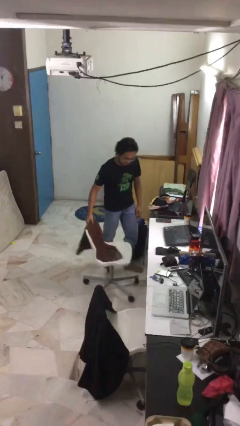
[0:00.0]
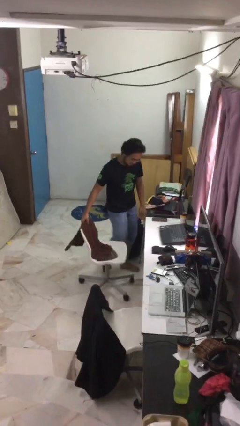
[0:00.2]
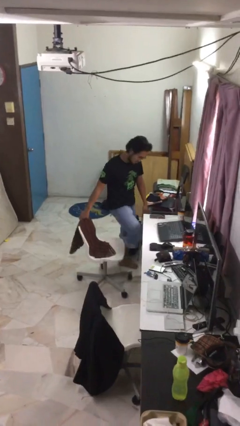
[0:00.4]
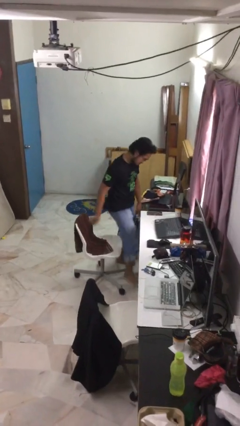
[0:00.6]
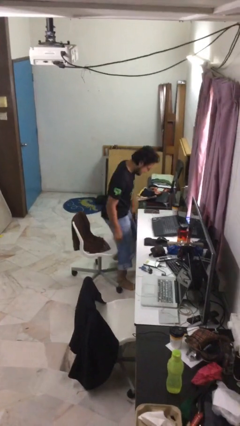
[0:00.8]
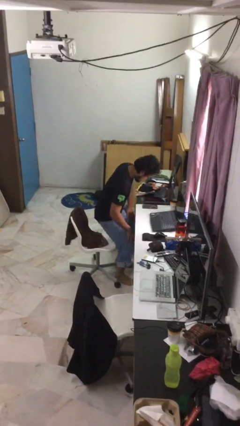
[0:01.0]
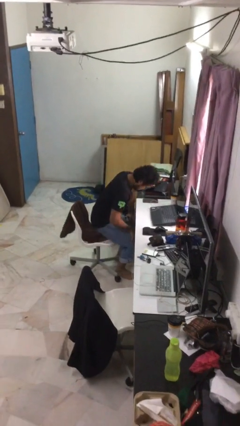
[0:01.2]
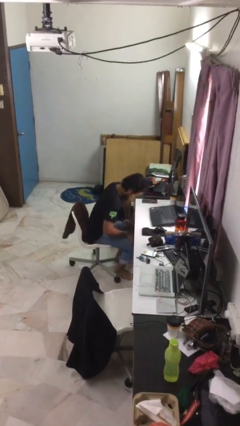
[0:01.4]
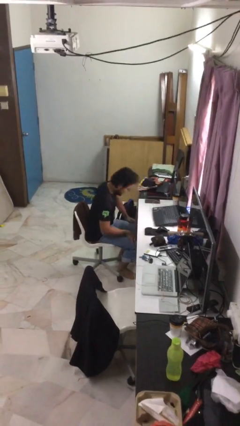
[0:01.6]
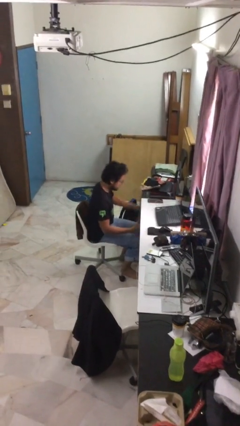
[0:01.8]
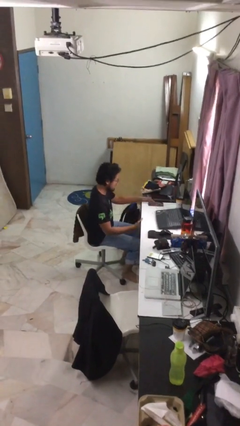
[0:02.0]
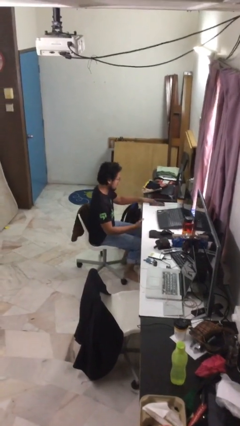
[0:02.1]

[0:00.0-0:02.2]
person sits down

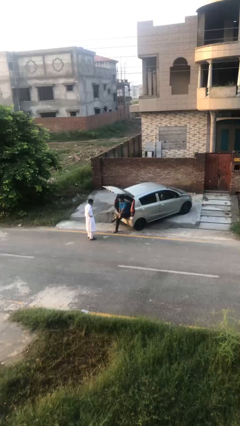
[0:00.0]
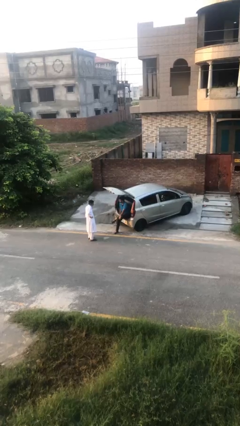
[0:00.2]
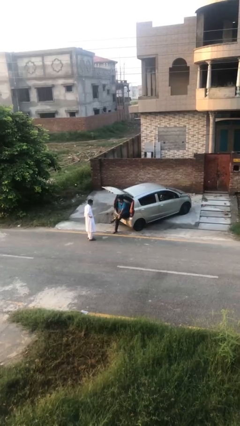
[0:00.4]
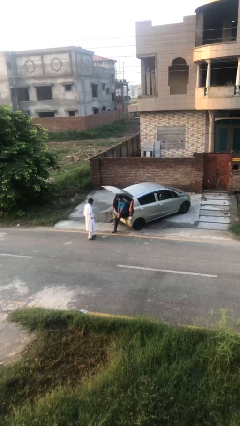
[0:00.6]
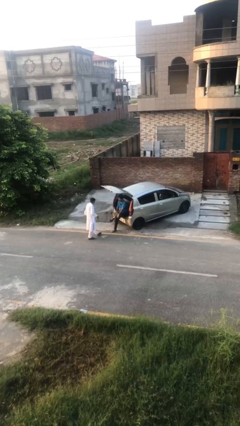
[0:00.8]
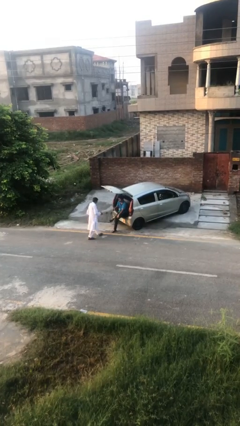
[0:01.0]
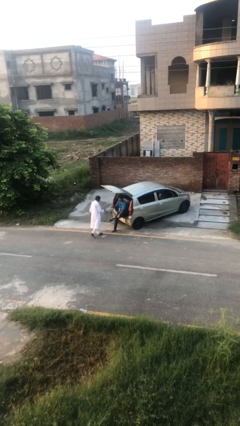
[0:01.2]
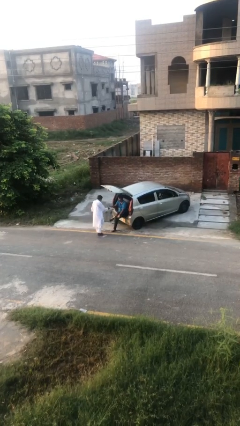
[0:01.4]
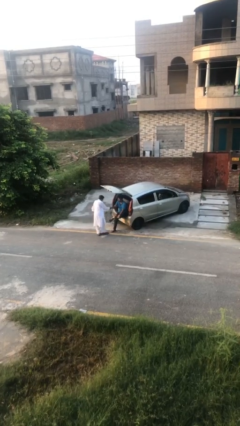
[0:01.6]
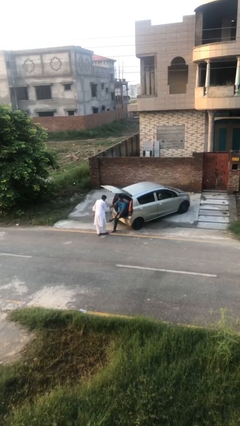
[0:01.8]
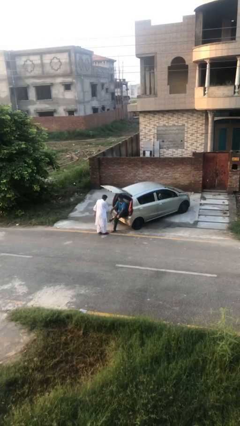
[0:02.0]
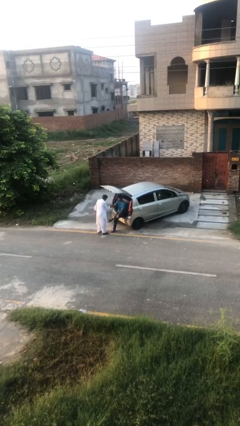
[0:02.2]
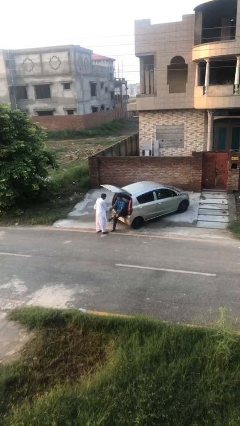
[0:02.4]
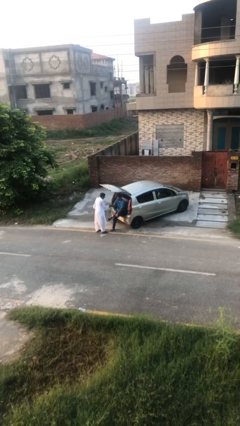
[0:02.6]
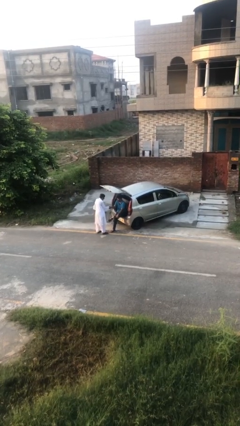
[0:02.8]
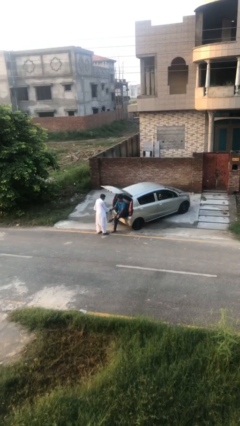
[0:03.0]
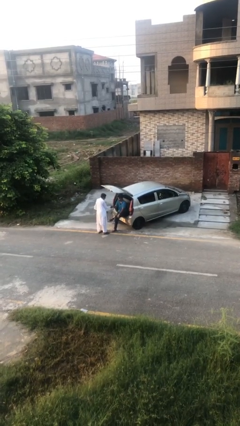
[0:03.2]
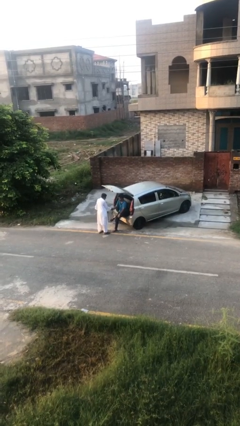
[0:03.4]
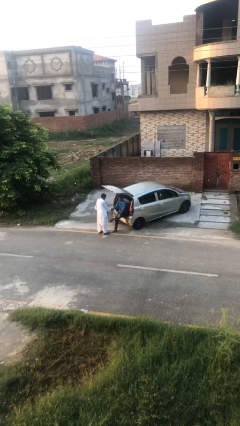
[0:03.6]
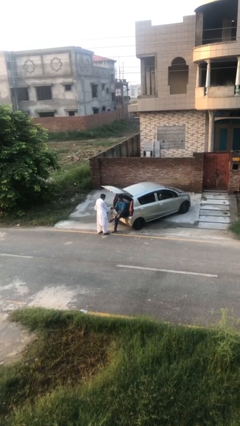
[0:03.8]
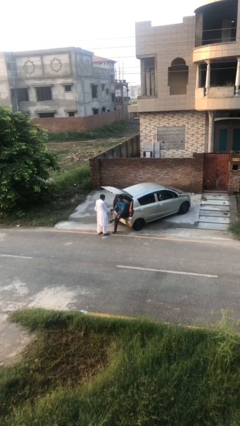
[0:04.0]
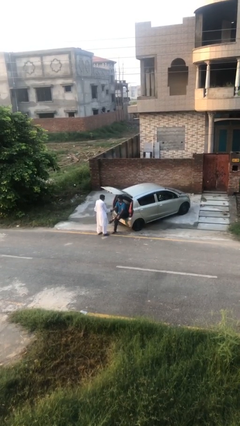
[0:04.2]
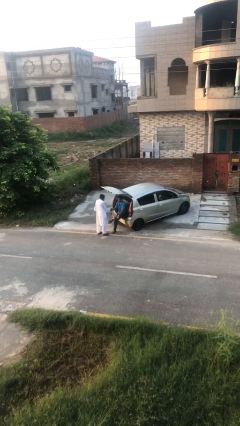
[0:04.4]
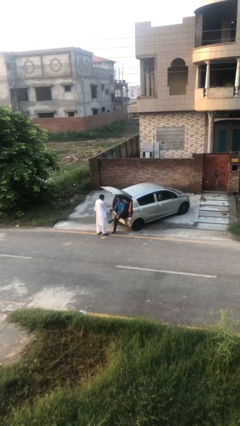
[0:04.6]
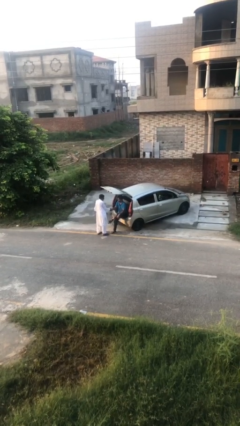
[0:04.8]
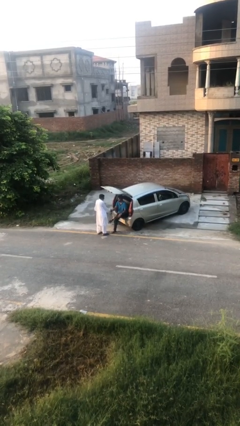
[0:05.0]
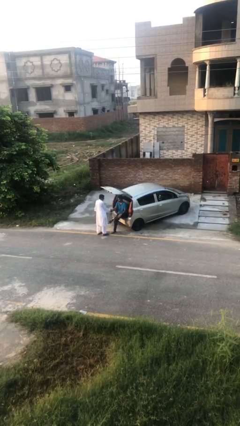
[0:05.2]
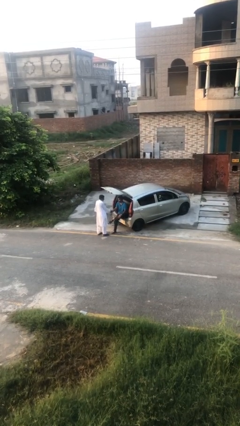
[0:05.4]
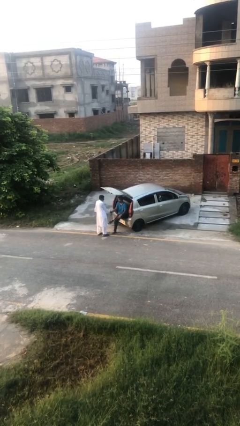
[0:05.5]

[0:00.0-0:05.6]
person shakes hand

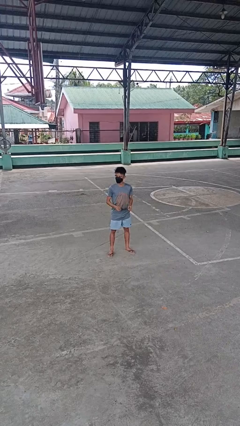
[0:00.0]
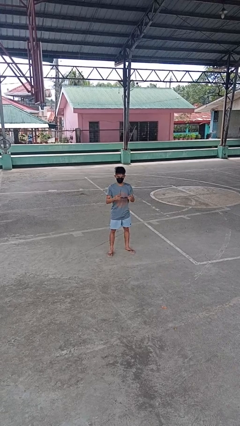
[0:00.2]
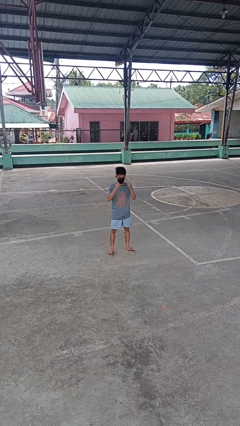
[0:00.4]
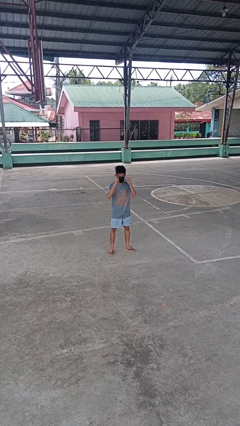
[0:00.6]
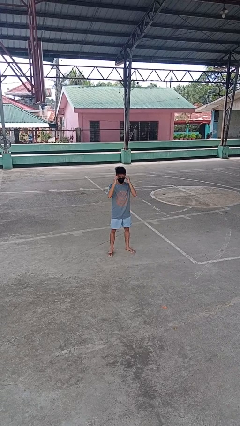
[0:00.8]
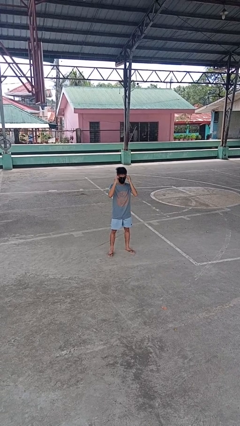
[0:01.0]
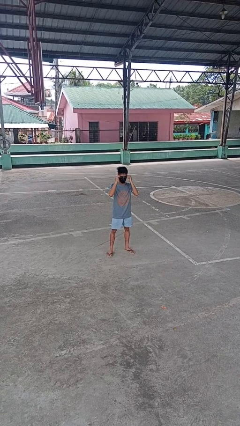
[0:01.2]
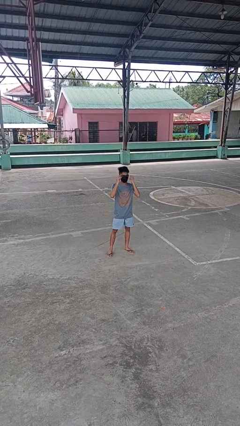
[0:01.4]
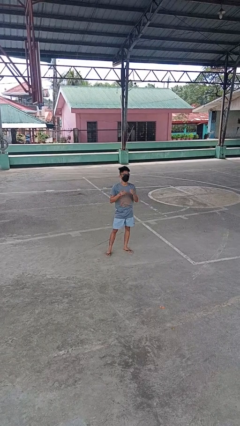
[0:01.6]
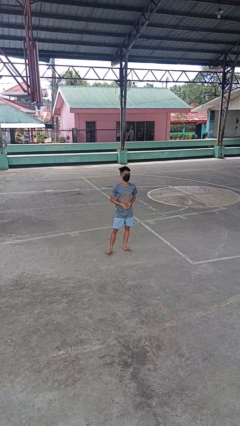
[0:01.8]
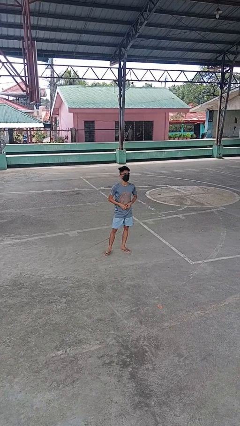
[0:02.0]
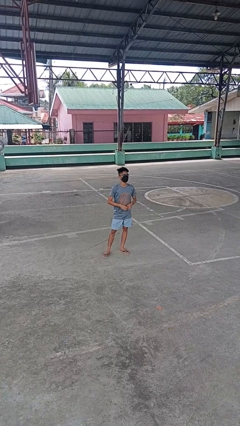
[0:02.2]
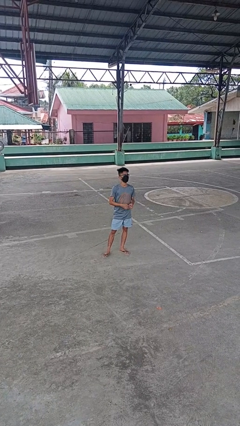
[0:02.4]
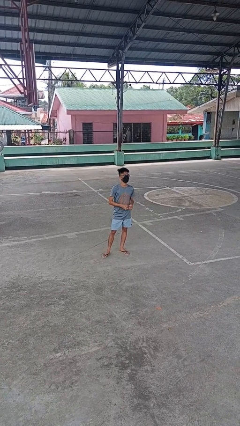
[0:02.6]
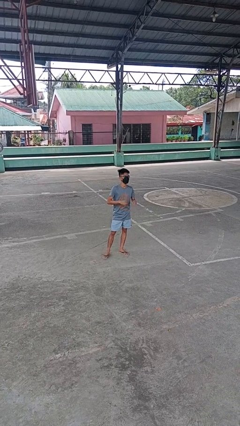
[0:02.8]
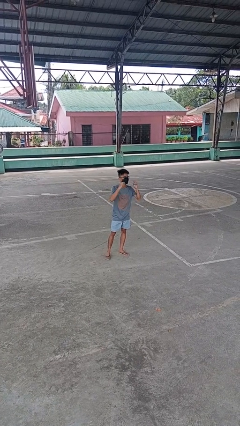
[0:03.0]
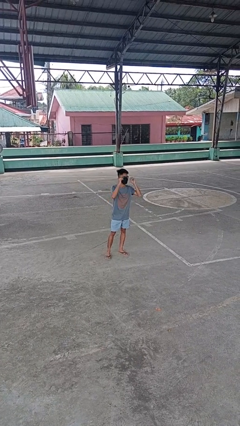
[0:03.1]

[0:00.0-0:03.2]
person puts on glasses

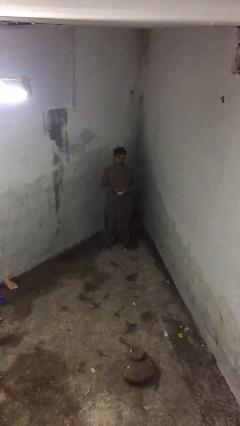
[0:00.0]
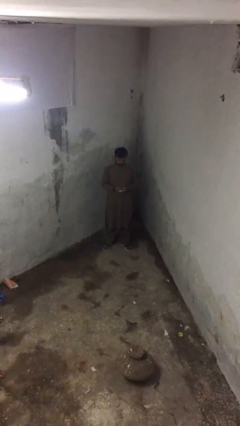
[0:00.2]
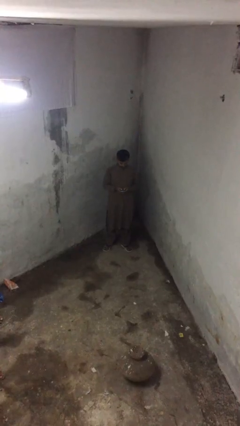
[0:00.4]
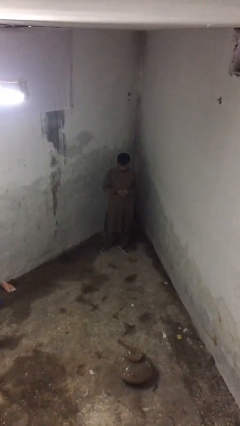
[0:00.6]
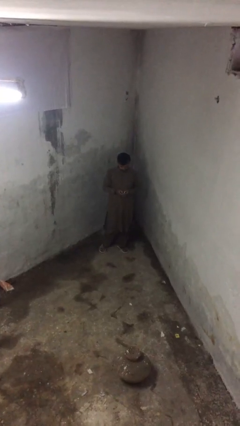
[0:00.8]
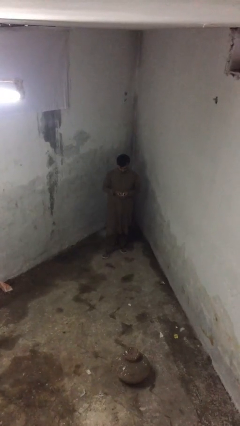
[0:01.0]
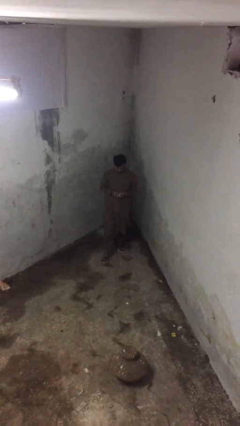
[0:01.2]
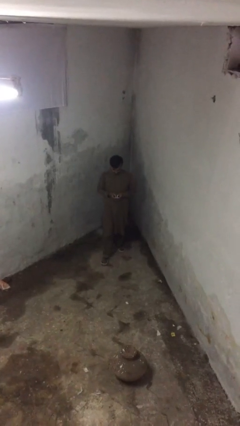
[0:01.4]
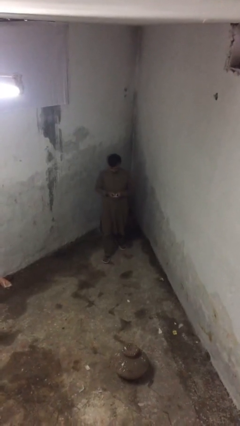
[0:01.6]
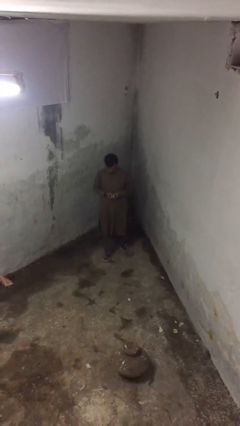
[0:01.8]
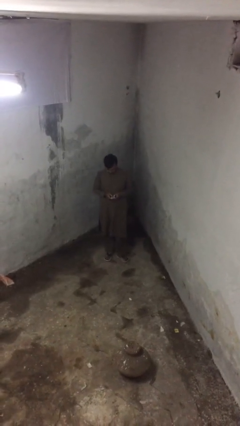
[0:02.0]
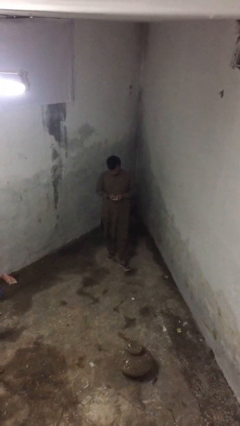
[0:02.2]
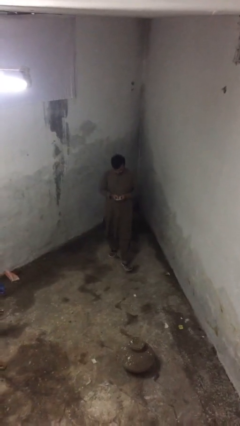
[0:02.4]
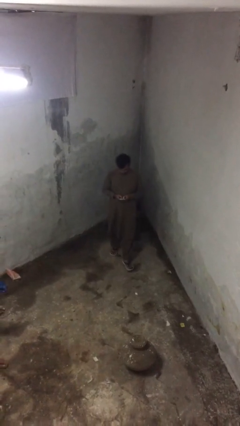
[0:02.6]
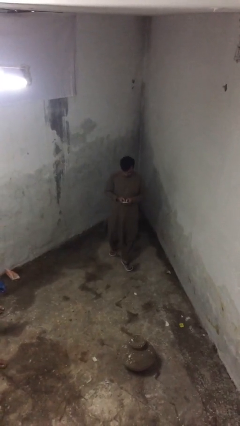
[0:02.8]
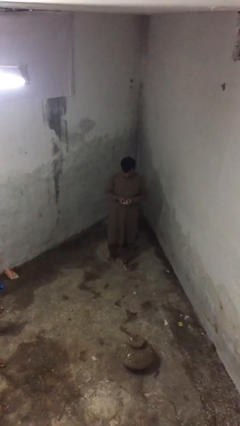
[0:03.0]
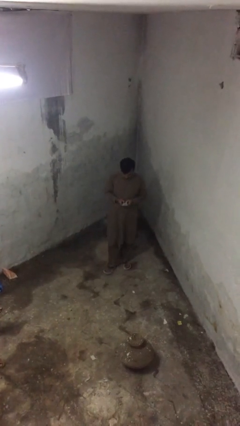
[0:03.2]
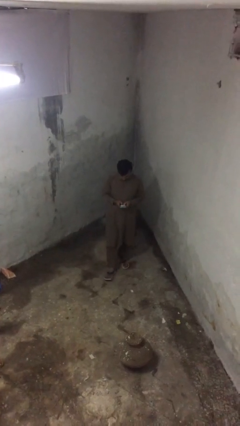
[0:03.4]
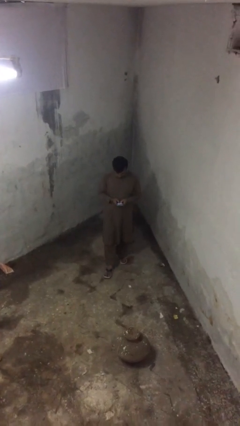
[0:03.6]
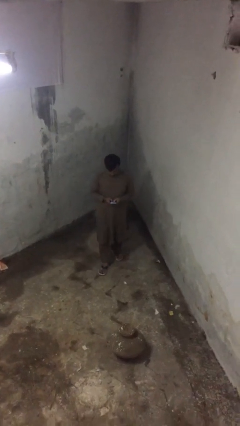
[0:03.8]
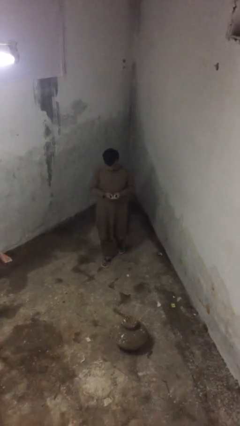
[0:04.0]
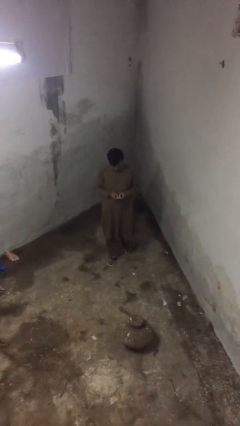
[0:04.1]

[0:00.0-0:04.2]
person texts on phone

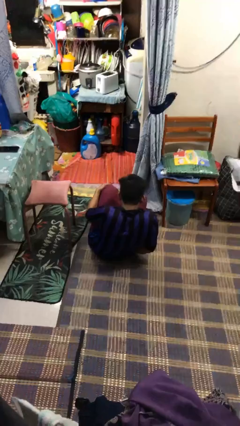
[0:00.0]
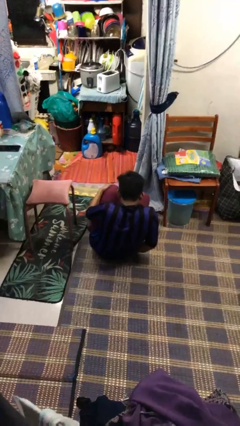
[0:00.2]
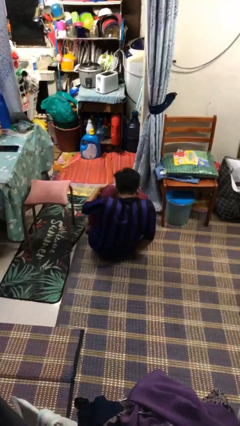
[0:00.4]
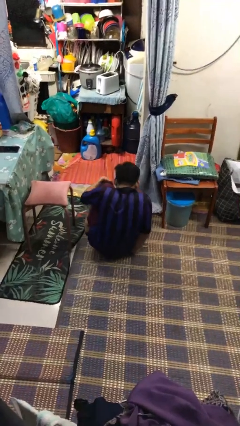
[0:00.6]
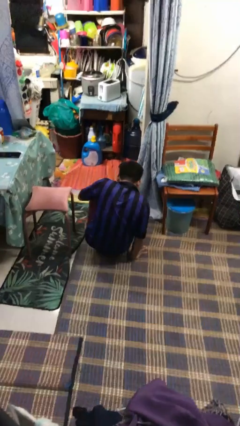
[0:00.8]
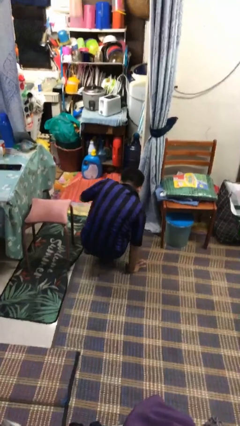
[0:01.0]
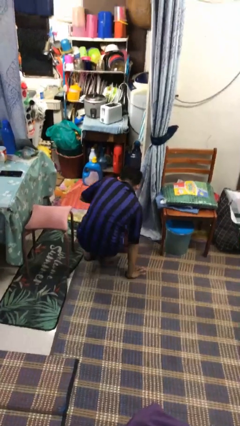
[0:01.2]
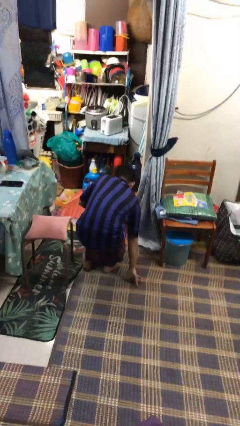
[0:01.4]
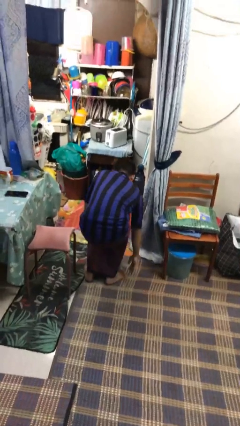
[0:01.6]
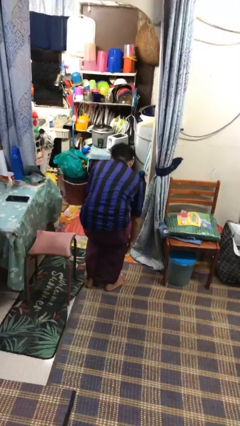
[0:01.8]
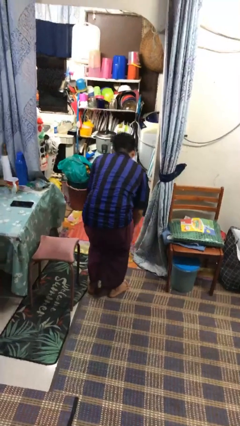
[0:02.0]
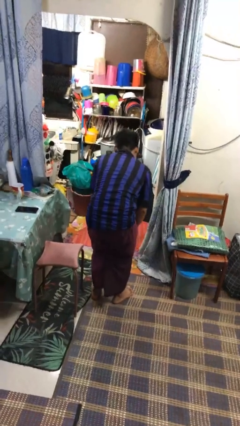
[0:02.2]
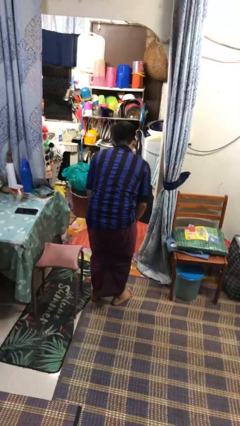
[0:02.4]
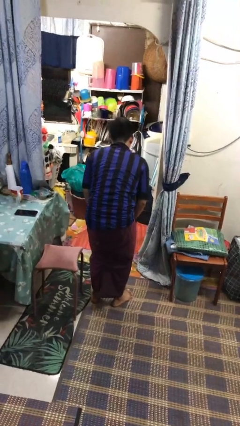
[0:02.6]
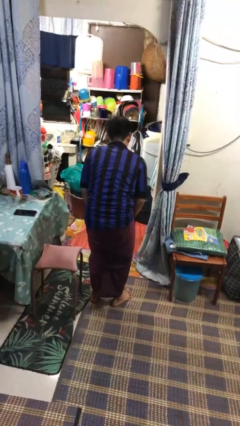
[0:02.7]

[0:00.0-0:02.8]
person stands up from floor
